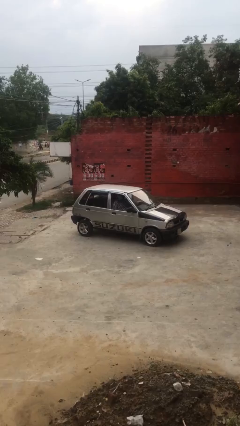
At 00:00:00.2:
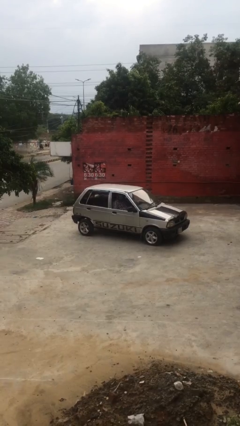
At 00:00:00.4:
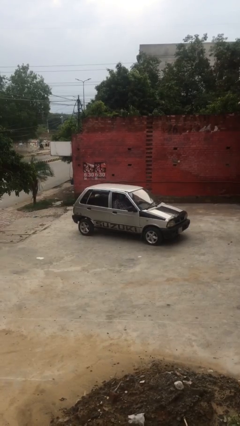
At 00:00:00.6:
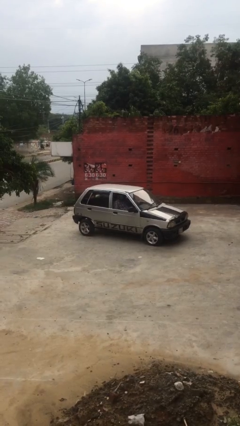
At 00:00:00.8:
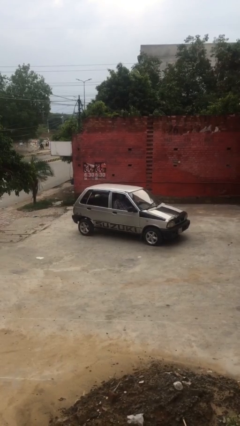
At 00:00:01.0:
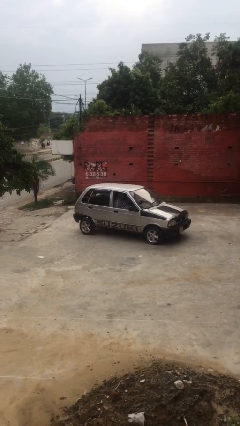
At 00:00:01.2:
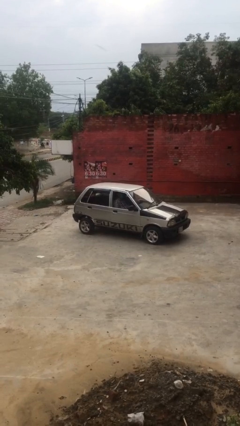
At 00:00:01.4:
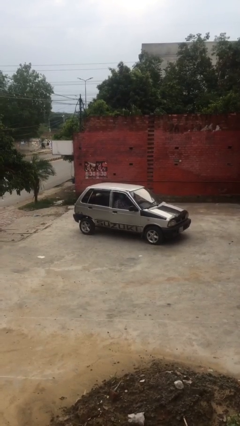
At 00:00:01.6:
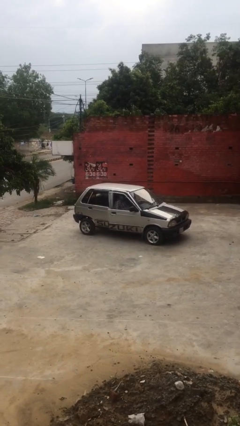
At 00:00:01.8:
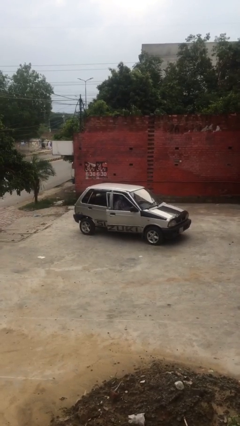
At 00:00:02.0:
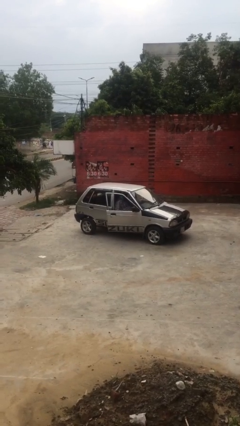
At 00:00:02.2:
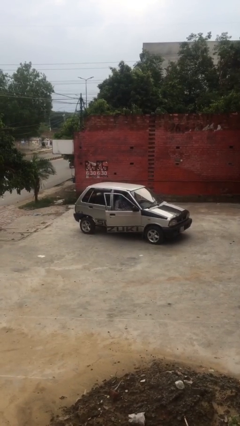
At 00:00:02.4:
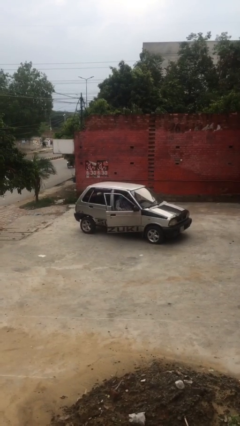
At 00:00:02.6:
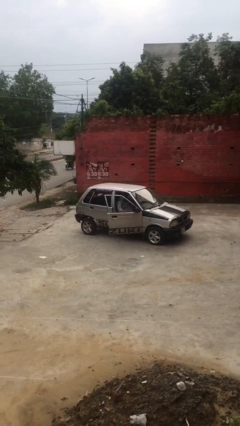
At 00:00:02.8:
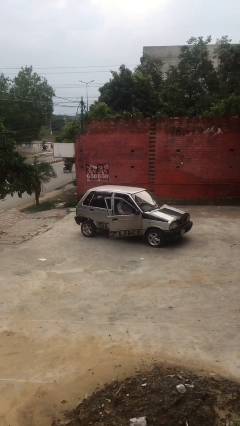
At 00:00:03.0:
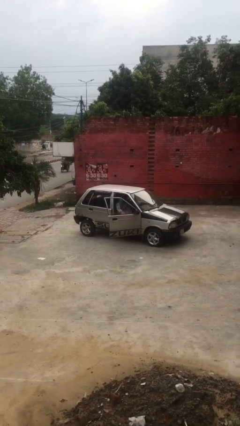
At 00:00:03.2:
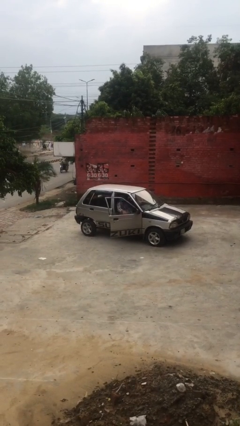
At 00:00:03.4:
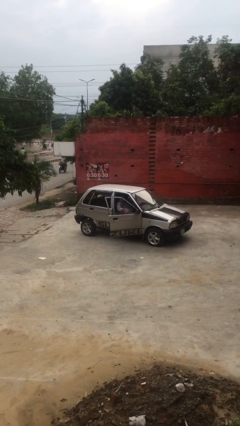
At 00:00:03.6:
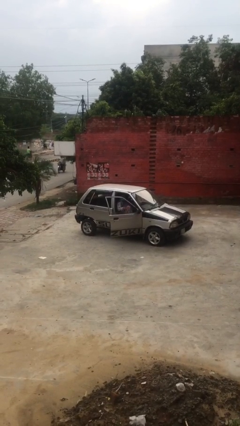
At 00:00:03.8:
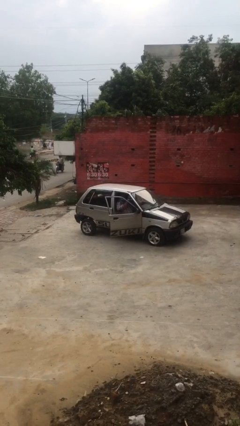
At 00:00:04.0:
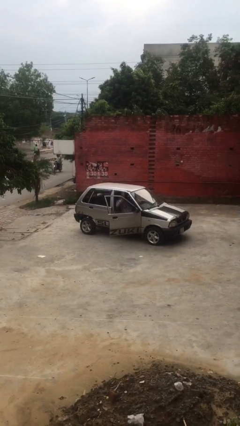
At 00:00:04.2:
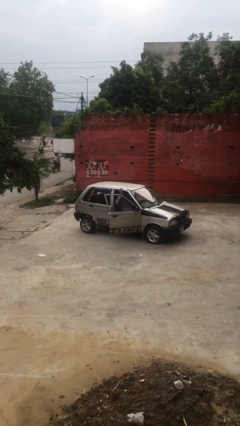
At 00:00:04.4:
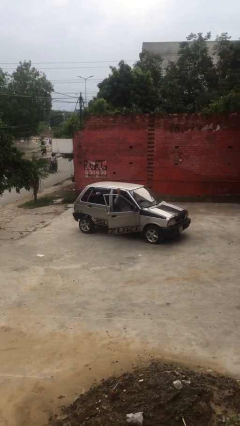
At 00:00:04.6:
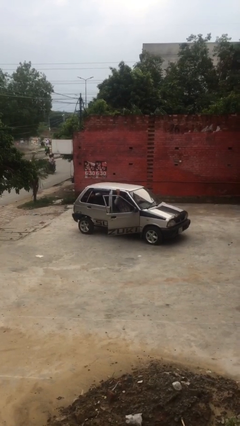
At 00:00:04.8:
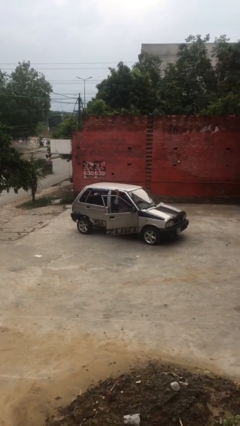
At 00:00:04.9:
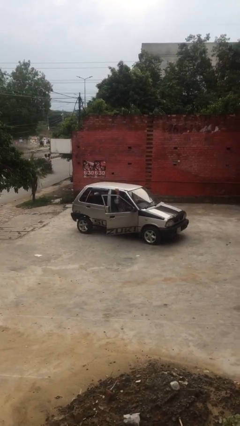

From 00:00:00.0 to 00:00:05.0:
person opens car door

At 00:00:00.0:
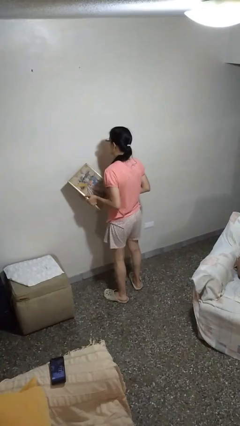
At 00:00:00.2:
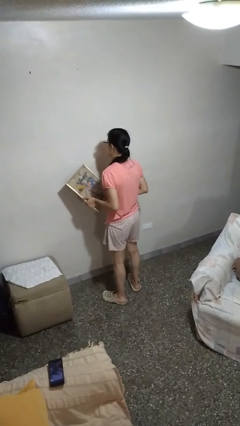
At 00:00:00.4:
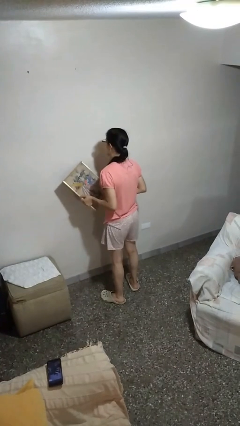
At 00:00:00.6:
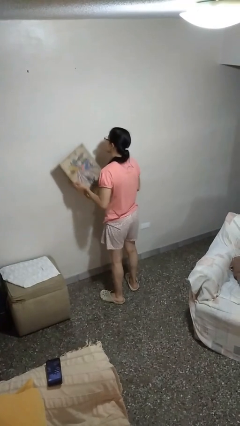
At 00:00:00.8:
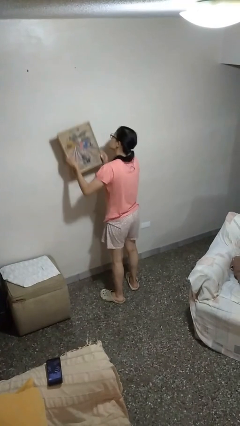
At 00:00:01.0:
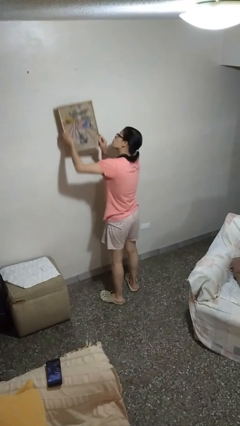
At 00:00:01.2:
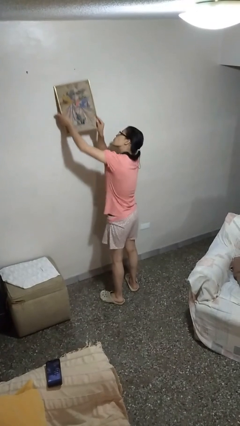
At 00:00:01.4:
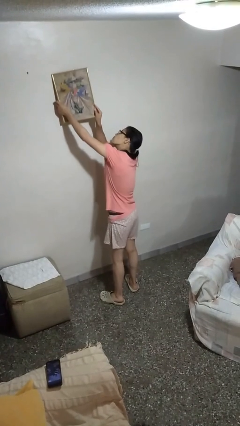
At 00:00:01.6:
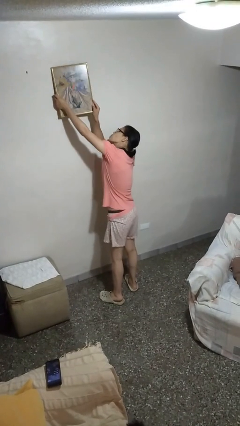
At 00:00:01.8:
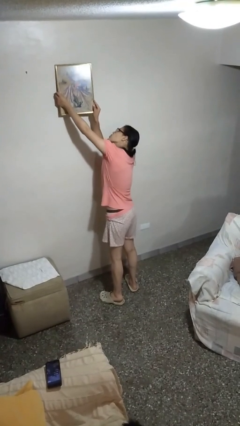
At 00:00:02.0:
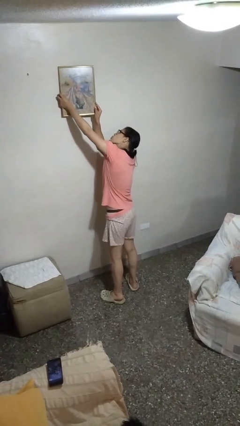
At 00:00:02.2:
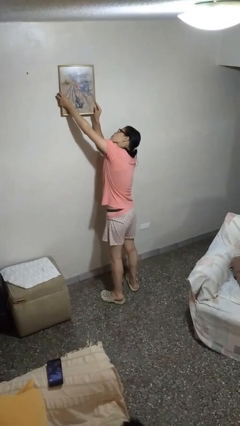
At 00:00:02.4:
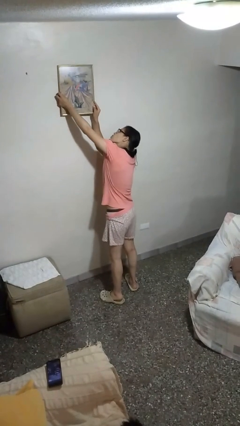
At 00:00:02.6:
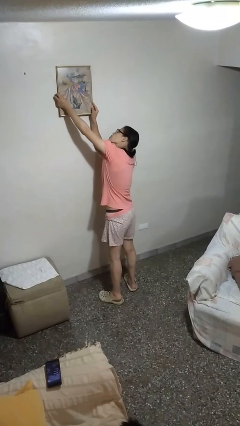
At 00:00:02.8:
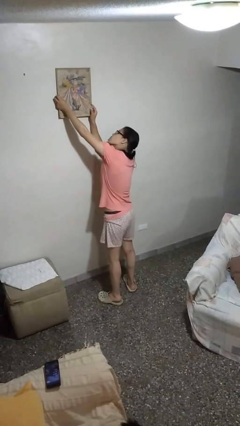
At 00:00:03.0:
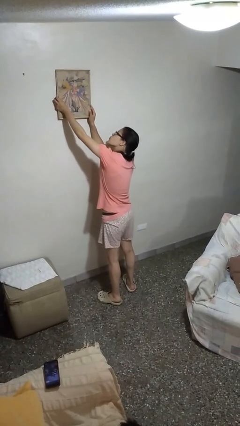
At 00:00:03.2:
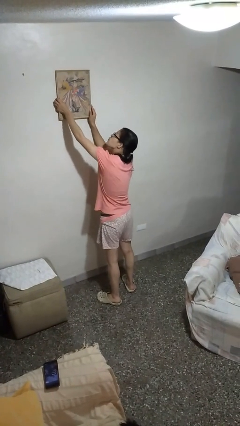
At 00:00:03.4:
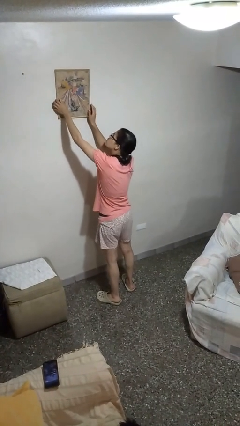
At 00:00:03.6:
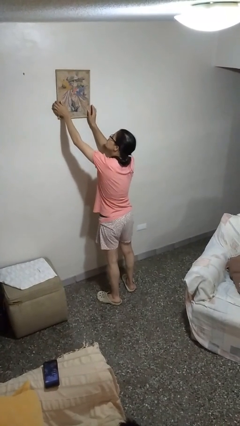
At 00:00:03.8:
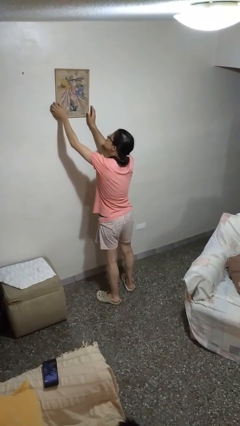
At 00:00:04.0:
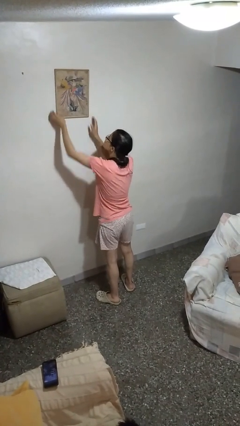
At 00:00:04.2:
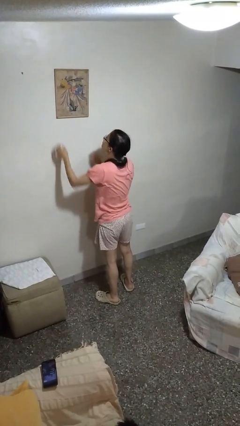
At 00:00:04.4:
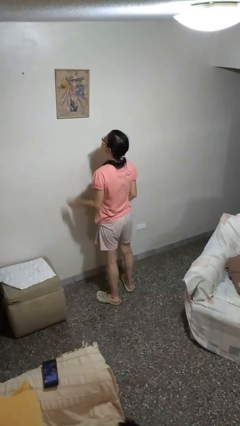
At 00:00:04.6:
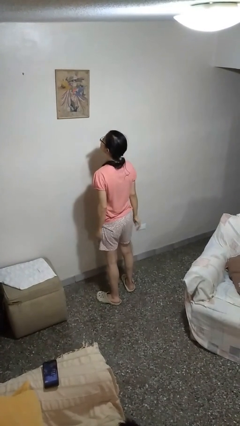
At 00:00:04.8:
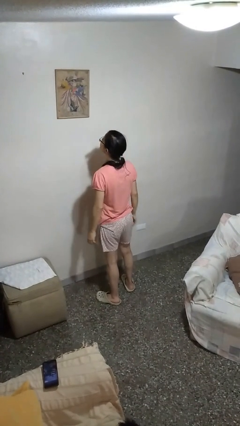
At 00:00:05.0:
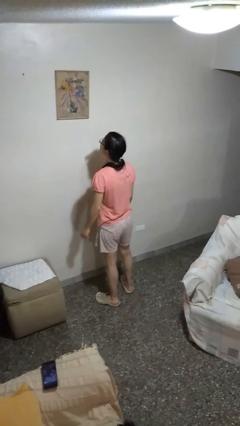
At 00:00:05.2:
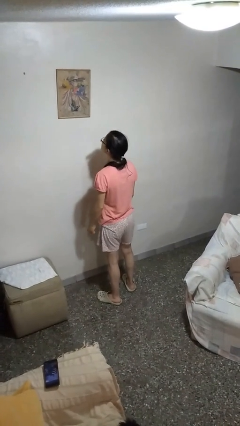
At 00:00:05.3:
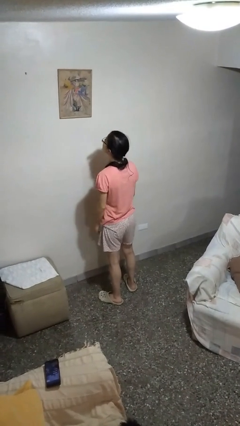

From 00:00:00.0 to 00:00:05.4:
person puts up picture frame

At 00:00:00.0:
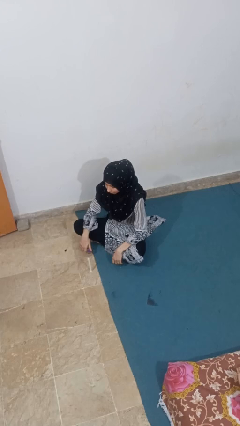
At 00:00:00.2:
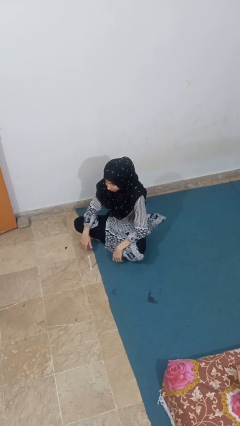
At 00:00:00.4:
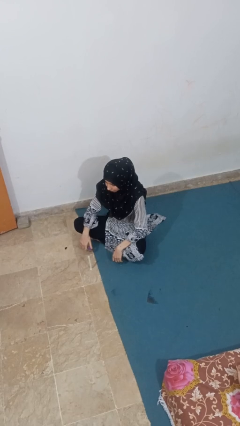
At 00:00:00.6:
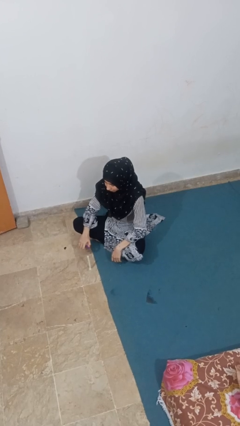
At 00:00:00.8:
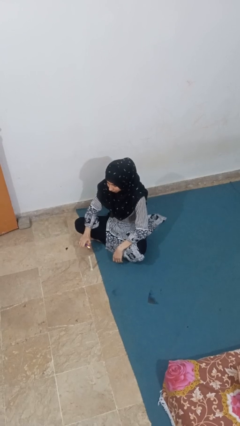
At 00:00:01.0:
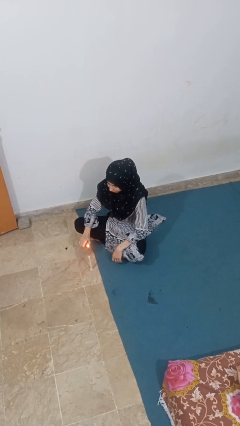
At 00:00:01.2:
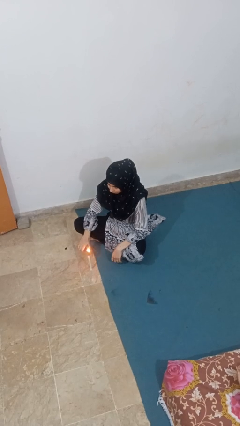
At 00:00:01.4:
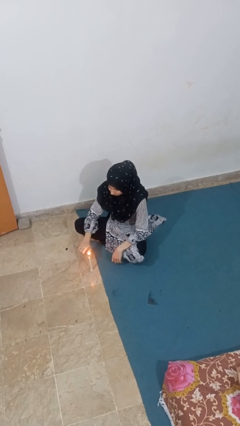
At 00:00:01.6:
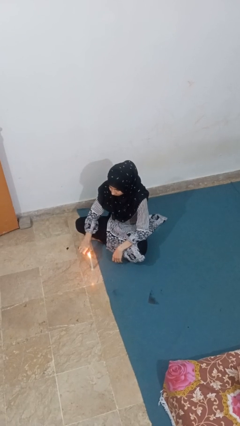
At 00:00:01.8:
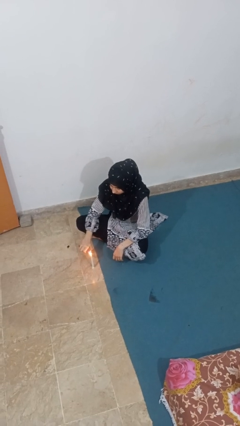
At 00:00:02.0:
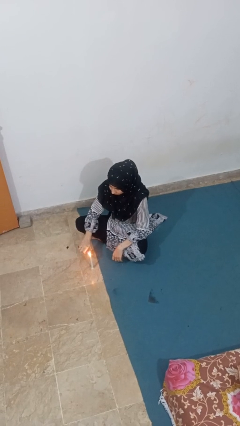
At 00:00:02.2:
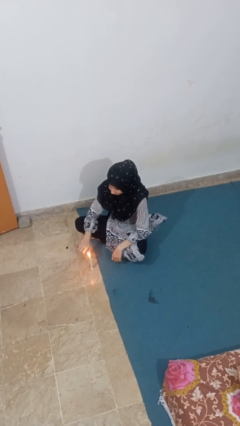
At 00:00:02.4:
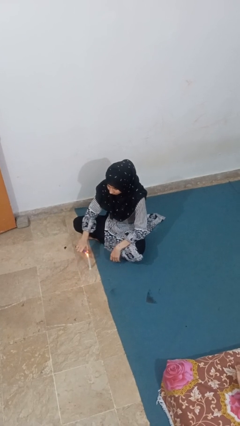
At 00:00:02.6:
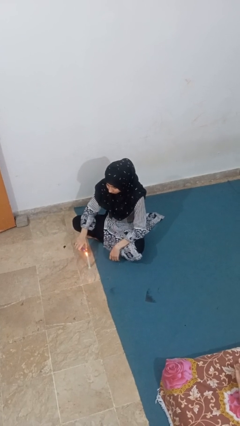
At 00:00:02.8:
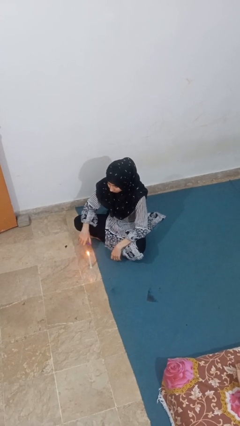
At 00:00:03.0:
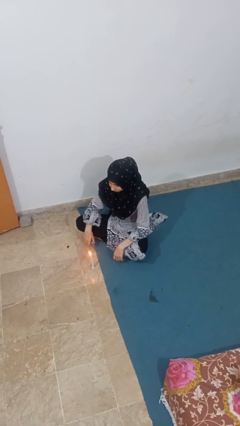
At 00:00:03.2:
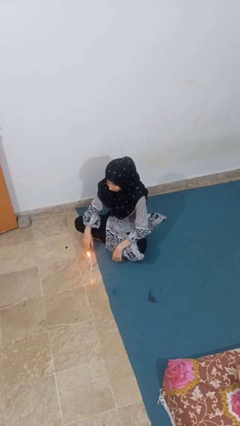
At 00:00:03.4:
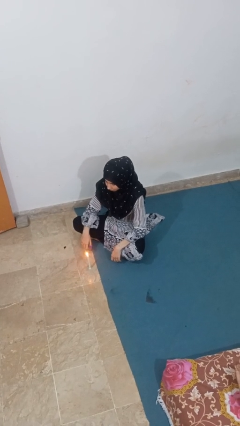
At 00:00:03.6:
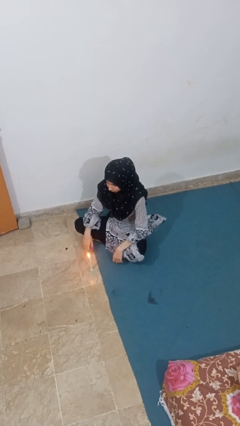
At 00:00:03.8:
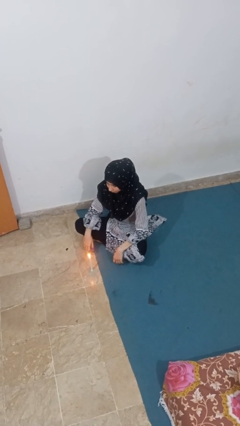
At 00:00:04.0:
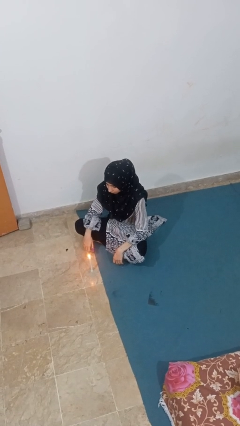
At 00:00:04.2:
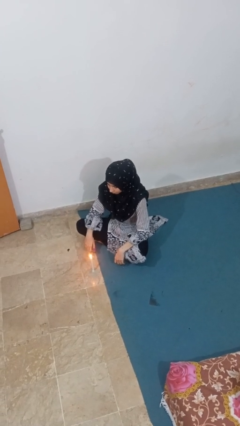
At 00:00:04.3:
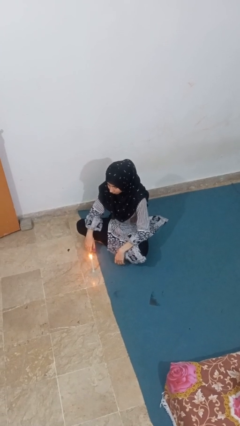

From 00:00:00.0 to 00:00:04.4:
person lights candle

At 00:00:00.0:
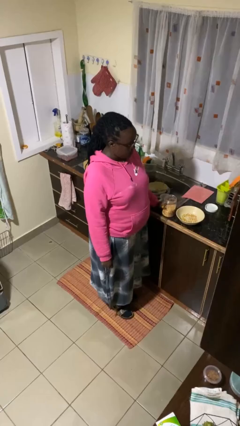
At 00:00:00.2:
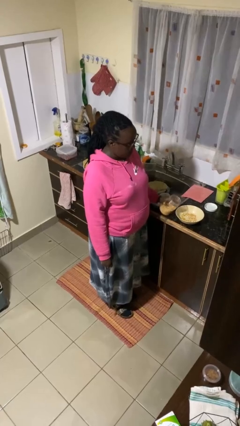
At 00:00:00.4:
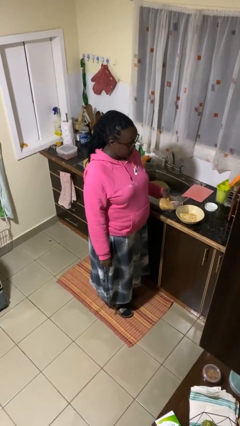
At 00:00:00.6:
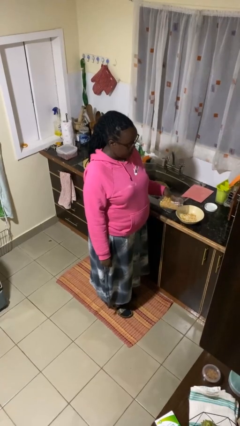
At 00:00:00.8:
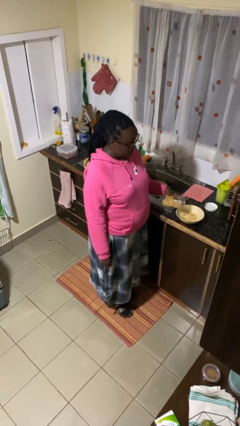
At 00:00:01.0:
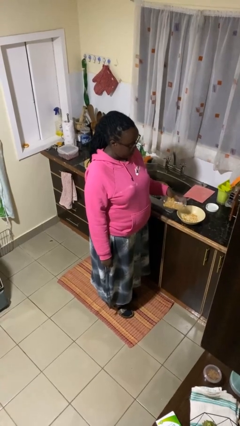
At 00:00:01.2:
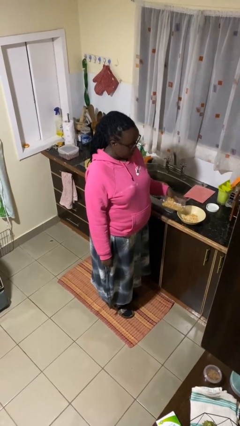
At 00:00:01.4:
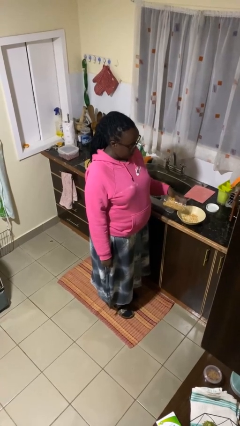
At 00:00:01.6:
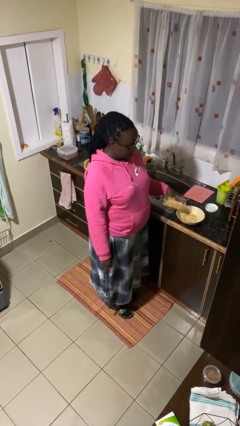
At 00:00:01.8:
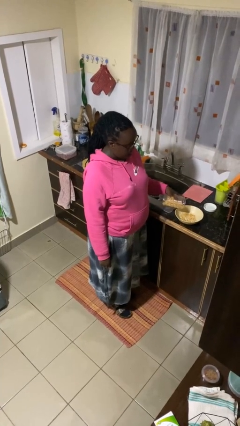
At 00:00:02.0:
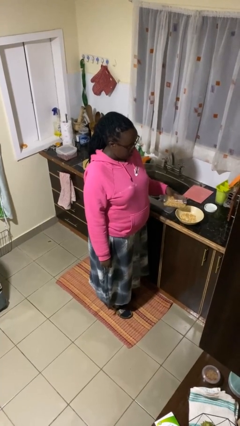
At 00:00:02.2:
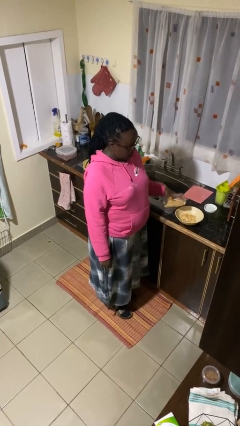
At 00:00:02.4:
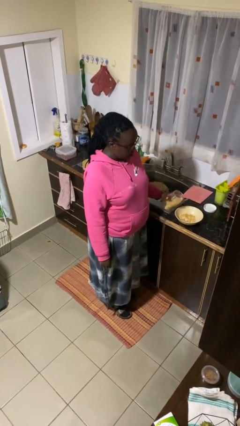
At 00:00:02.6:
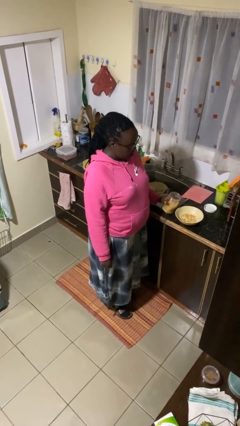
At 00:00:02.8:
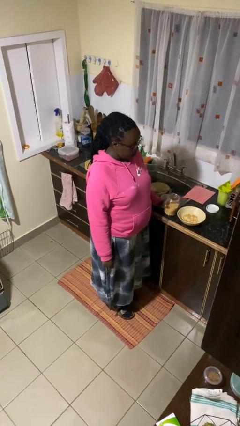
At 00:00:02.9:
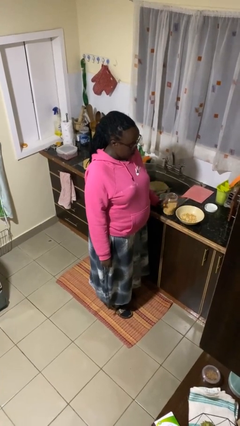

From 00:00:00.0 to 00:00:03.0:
person pours into bowl
